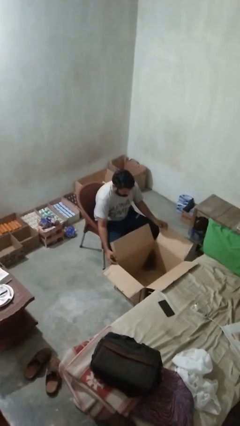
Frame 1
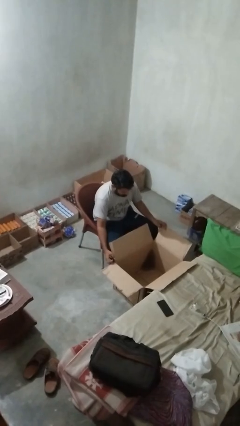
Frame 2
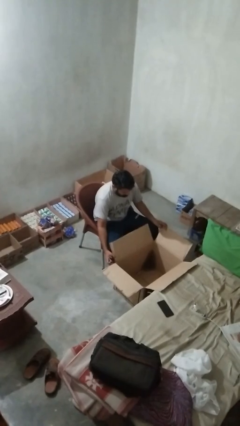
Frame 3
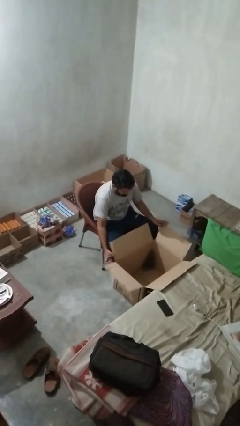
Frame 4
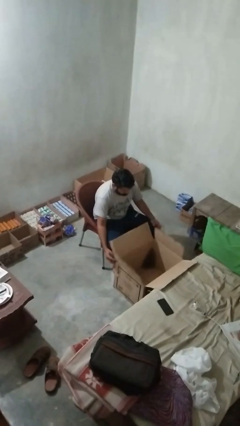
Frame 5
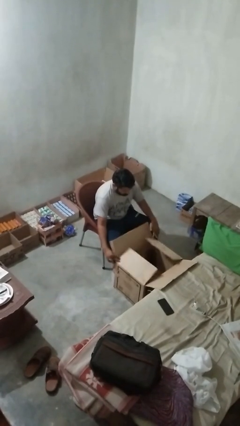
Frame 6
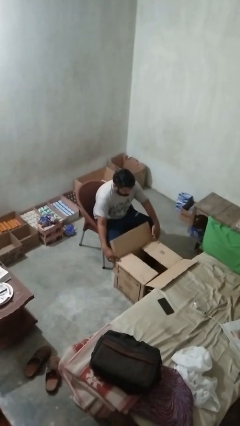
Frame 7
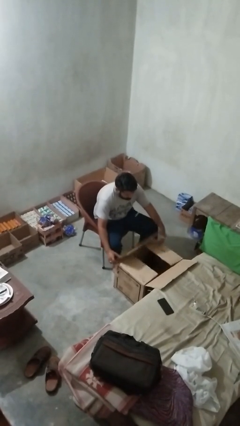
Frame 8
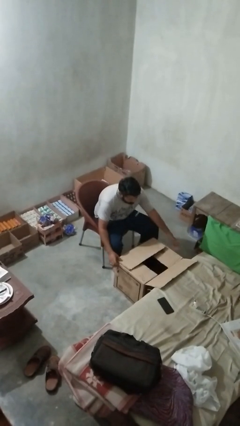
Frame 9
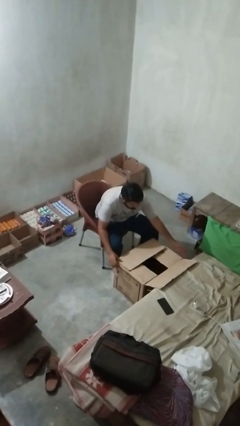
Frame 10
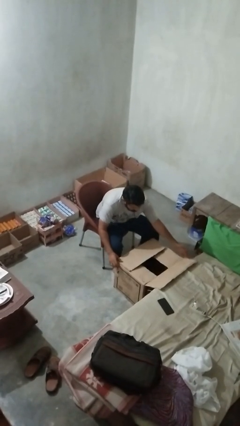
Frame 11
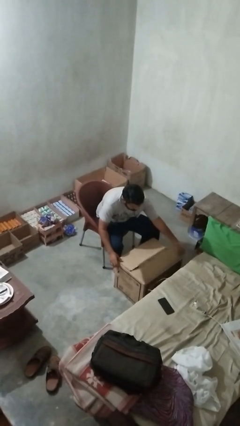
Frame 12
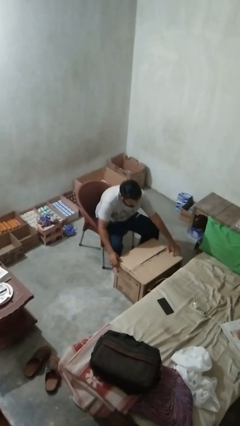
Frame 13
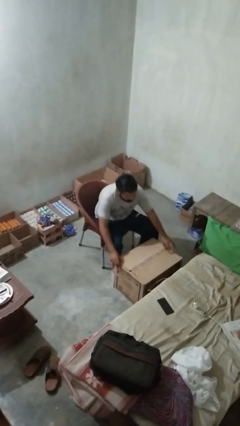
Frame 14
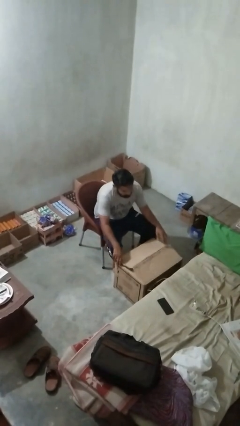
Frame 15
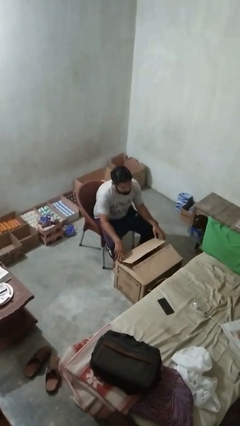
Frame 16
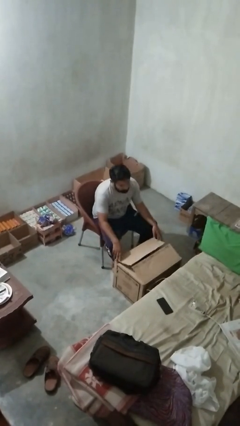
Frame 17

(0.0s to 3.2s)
person closes box

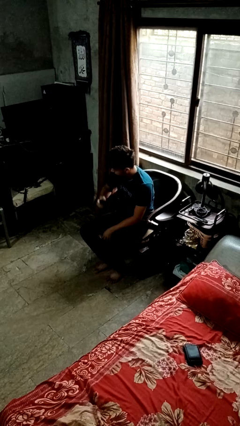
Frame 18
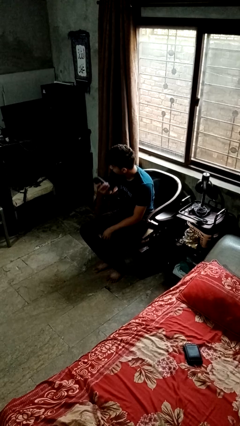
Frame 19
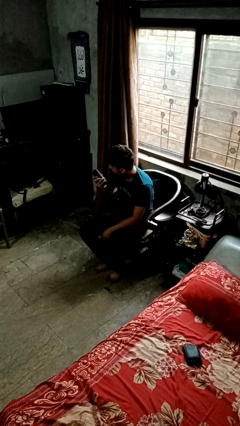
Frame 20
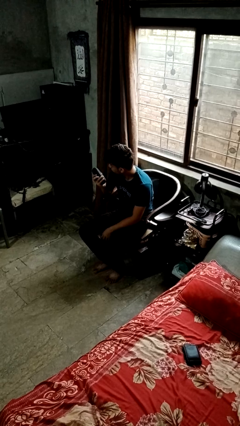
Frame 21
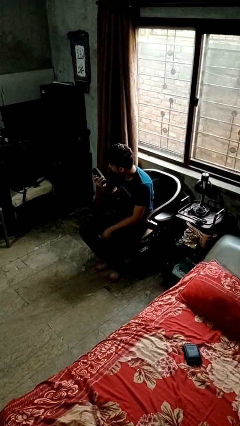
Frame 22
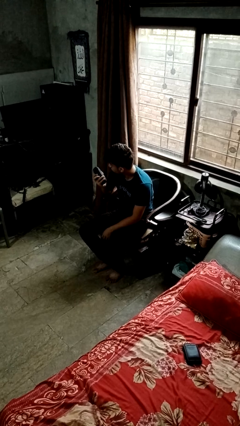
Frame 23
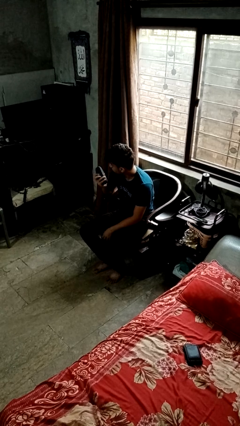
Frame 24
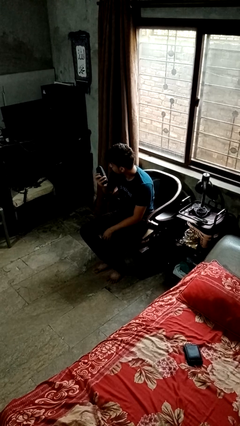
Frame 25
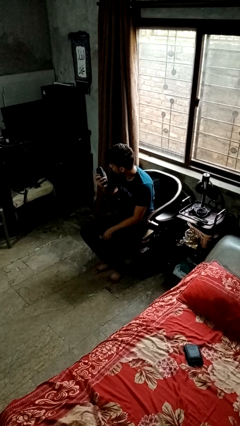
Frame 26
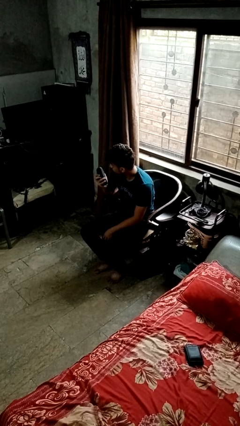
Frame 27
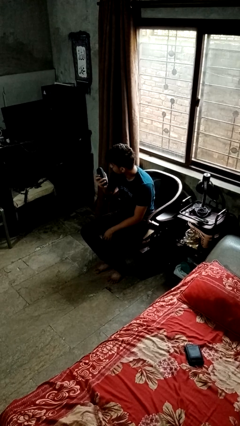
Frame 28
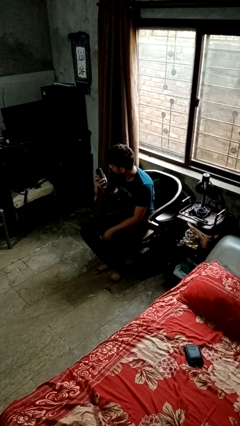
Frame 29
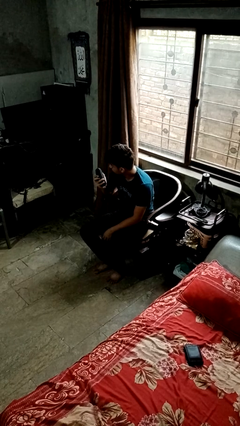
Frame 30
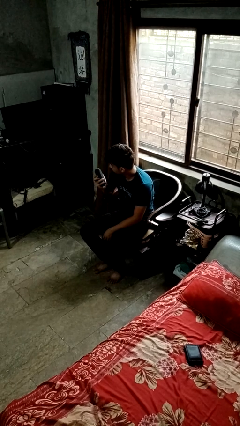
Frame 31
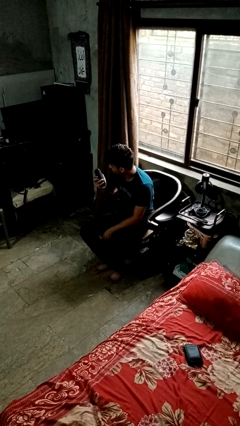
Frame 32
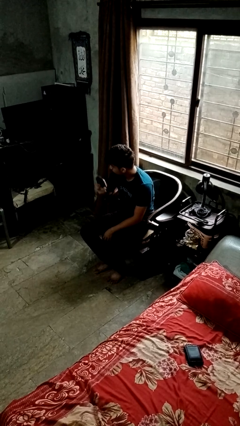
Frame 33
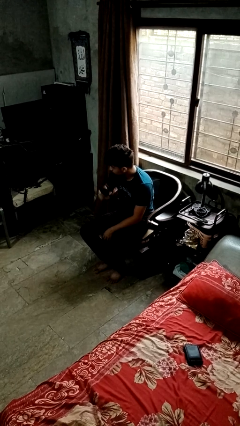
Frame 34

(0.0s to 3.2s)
person uses television remote

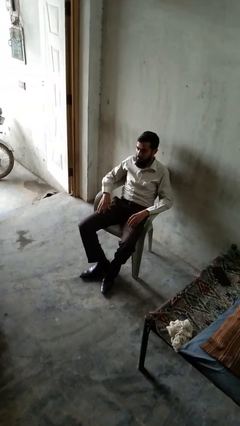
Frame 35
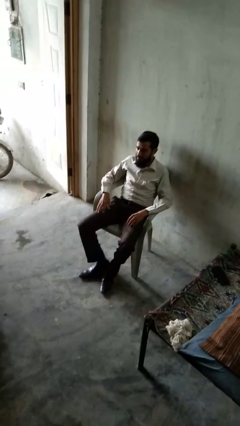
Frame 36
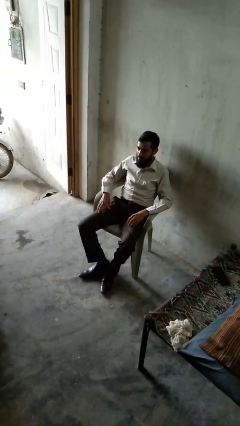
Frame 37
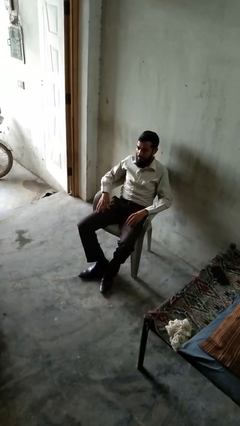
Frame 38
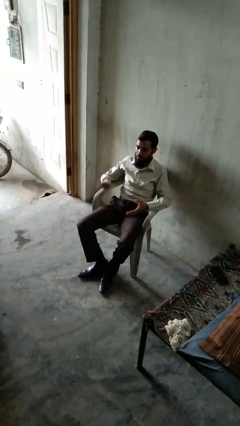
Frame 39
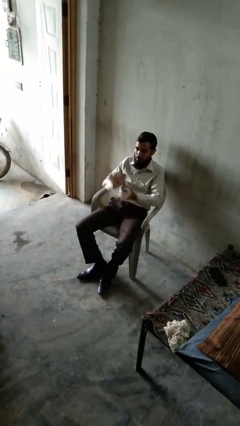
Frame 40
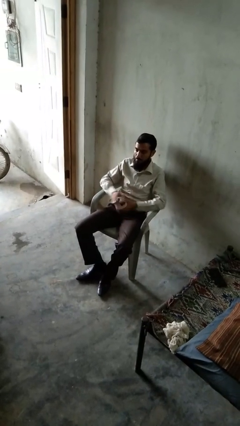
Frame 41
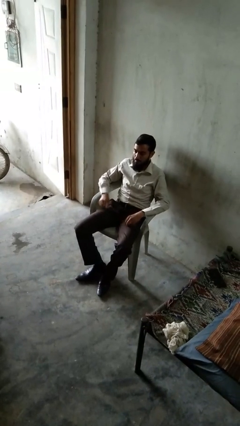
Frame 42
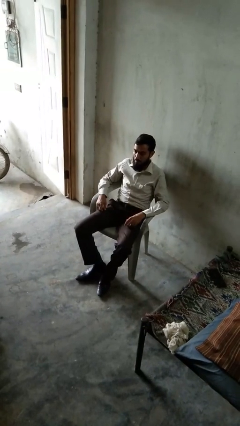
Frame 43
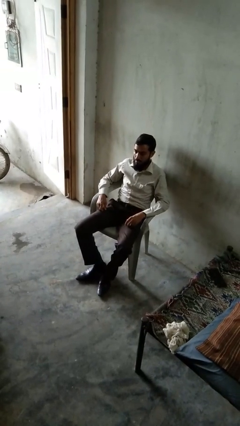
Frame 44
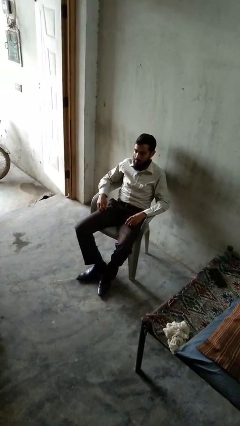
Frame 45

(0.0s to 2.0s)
person claps hands

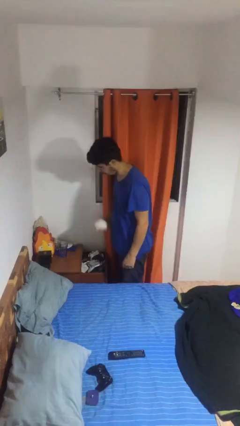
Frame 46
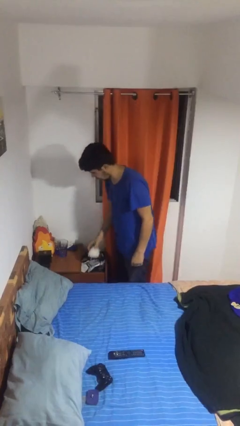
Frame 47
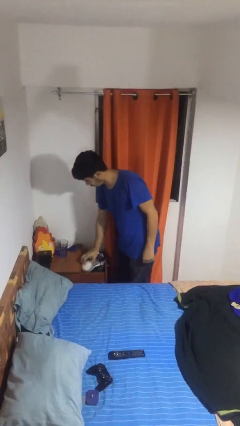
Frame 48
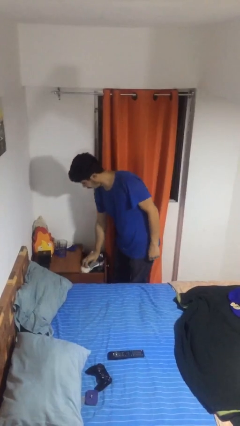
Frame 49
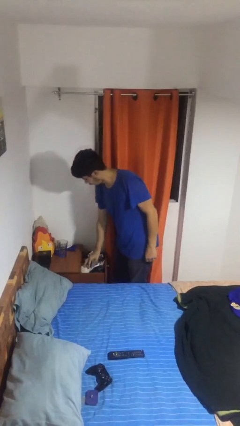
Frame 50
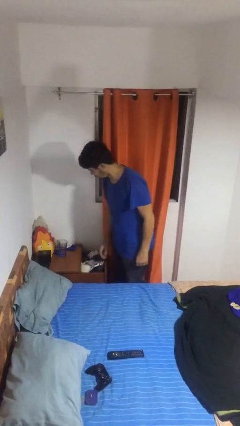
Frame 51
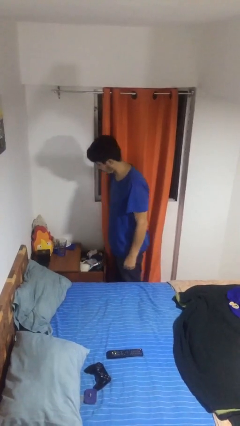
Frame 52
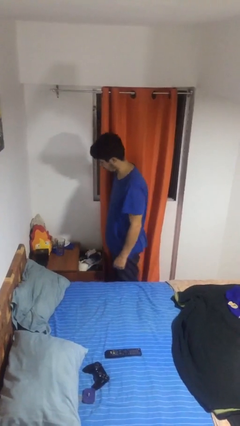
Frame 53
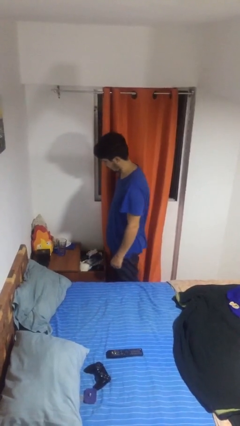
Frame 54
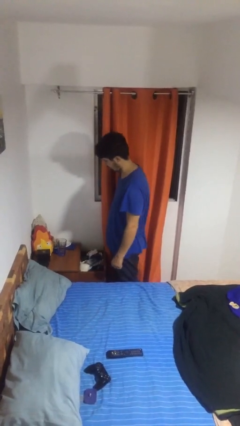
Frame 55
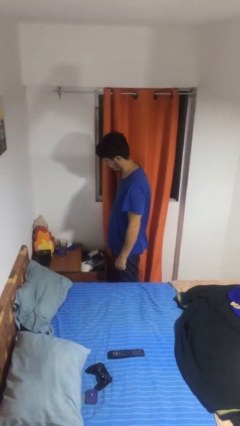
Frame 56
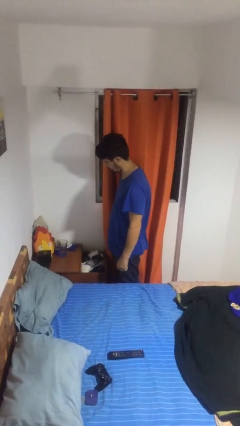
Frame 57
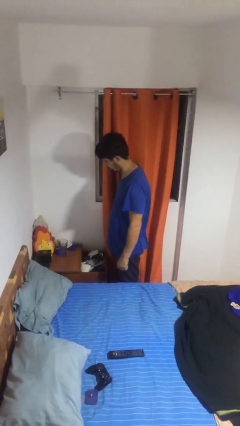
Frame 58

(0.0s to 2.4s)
person puts clothes into dresser

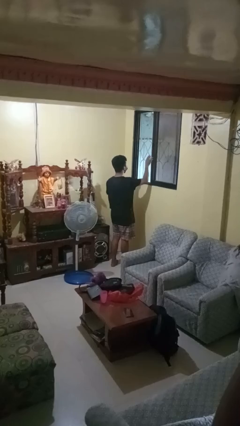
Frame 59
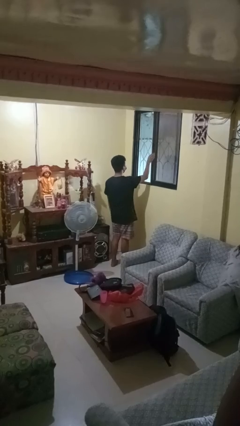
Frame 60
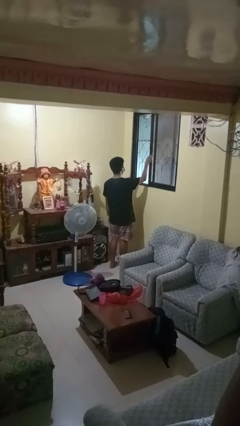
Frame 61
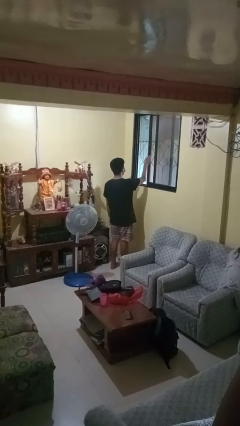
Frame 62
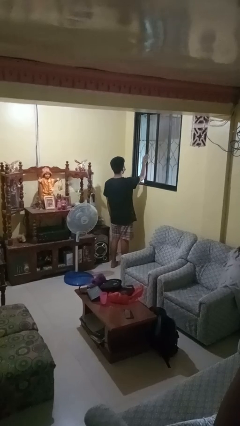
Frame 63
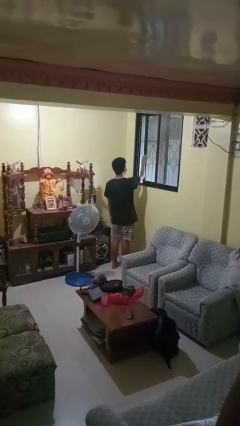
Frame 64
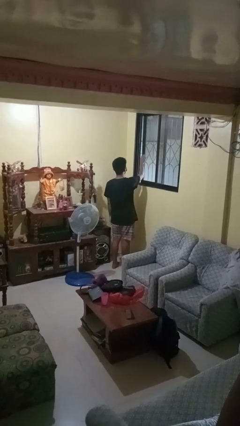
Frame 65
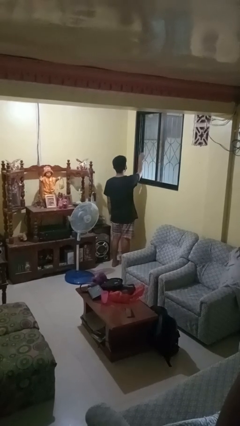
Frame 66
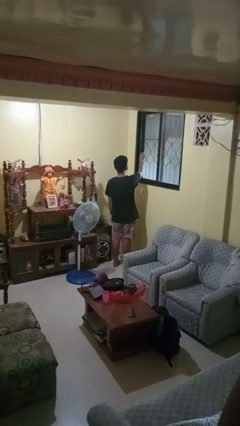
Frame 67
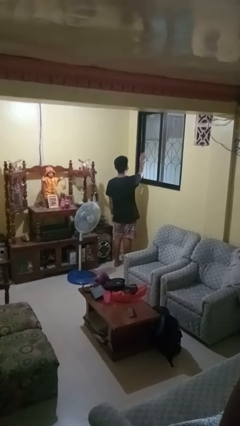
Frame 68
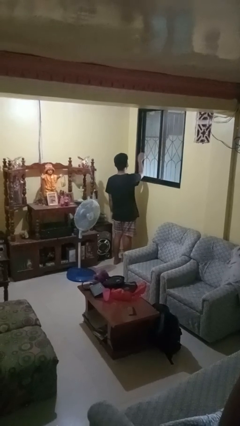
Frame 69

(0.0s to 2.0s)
person closes home window

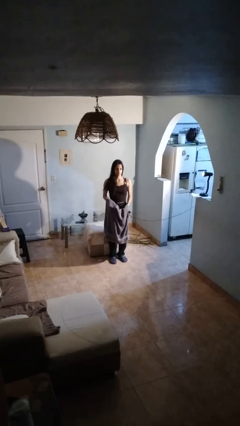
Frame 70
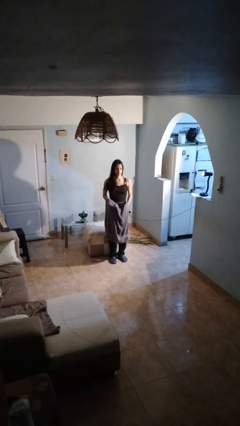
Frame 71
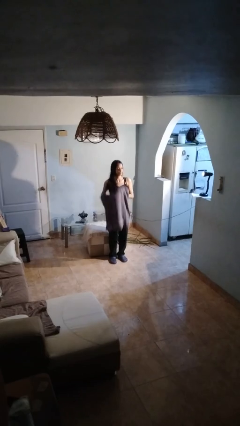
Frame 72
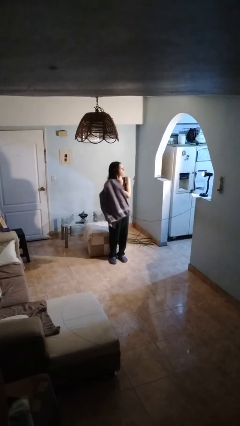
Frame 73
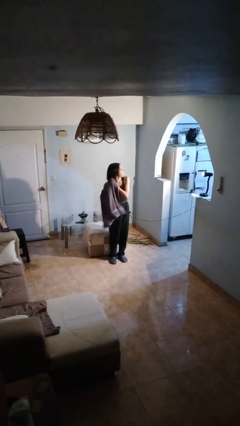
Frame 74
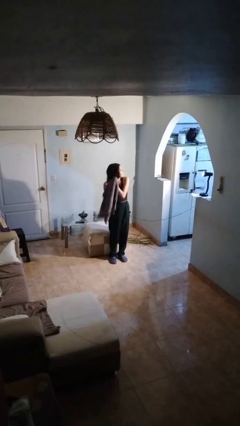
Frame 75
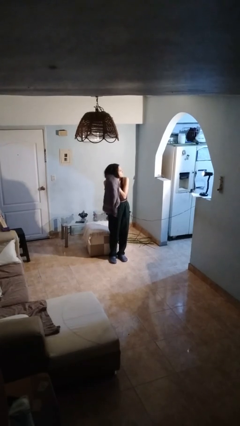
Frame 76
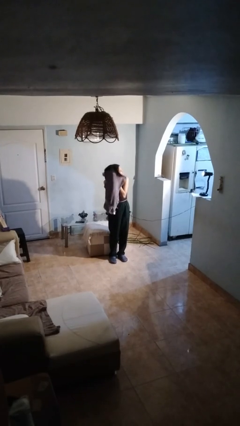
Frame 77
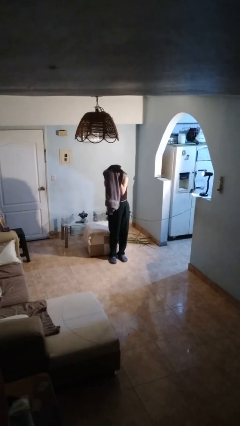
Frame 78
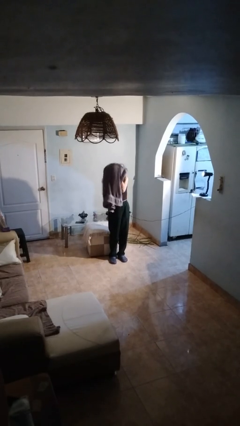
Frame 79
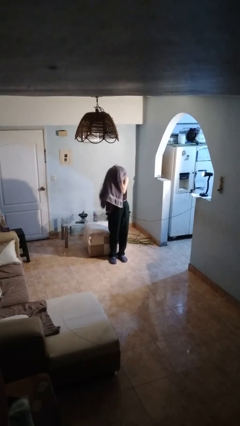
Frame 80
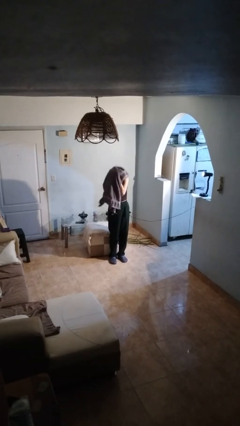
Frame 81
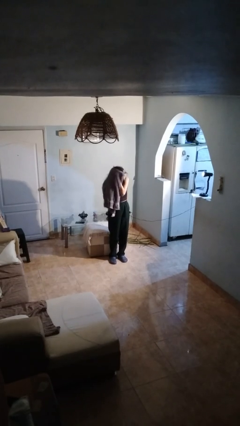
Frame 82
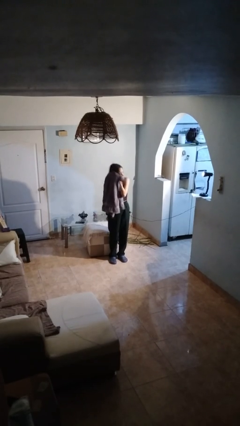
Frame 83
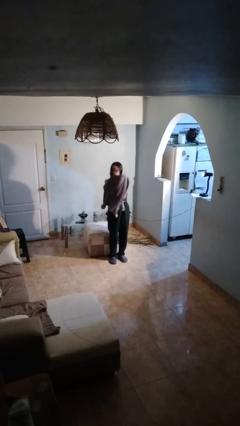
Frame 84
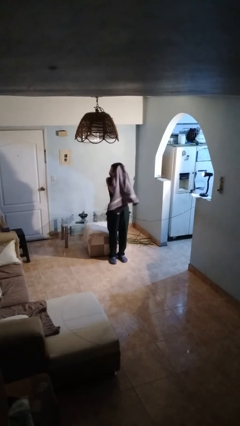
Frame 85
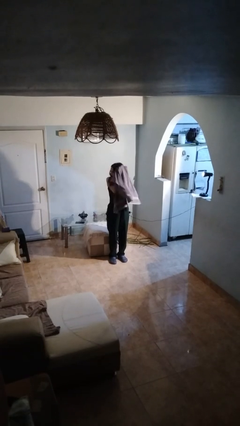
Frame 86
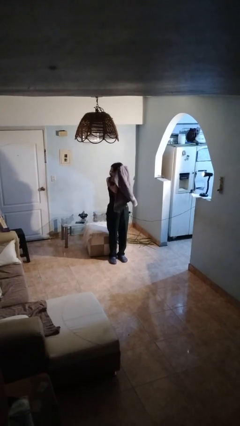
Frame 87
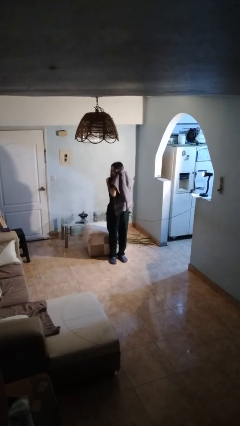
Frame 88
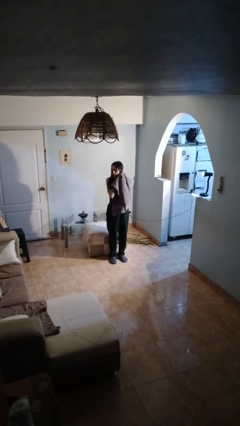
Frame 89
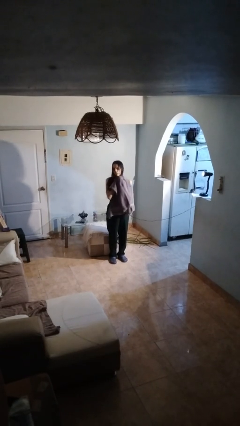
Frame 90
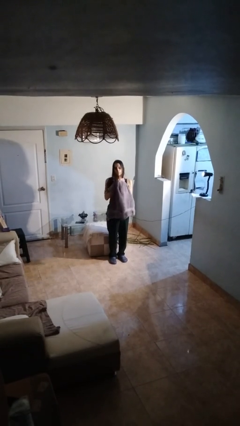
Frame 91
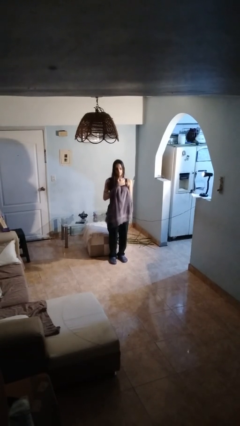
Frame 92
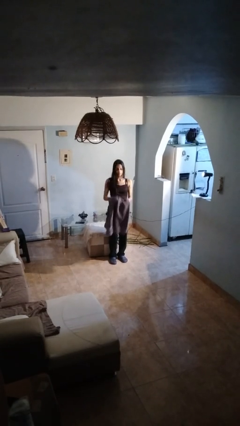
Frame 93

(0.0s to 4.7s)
person dries hair with towel
